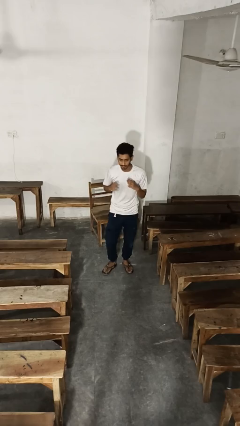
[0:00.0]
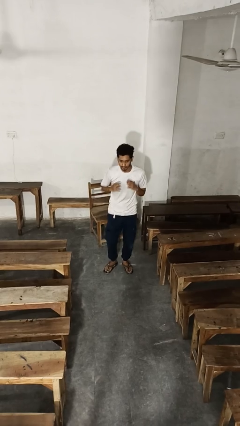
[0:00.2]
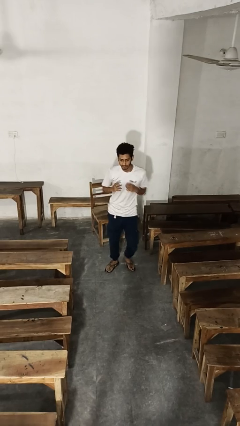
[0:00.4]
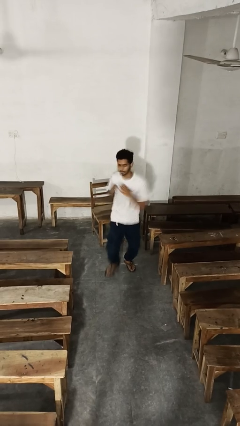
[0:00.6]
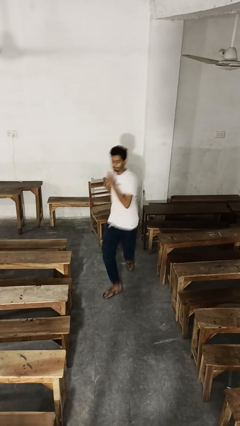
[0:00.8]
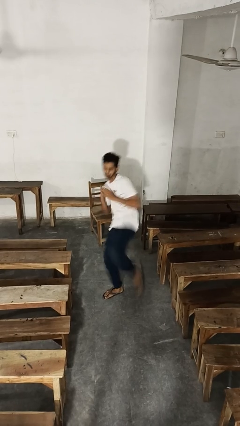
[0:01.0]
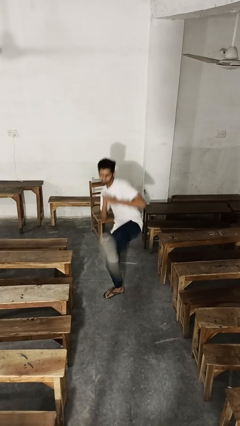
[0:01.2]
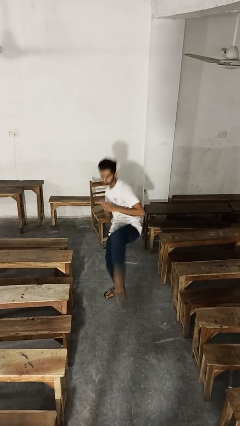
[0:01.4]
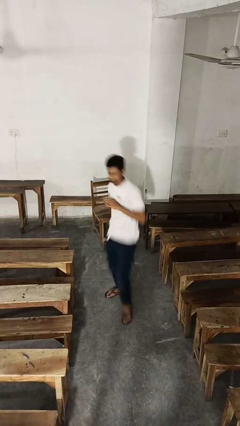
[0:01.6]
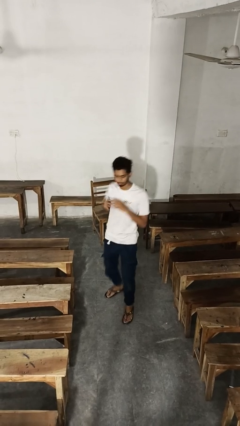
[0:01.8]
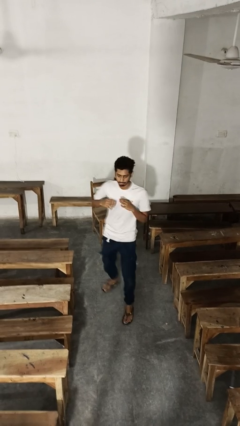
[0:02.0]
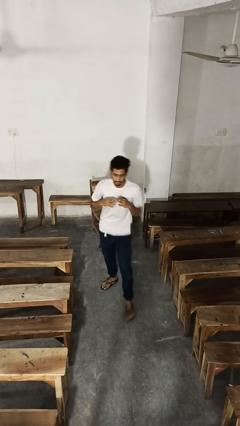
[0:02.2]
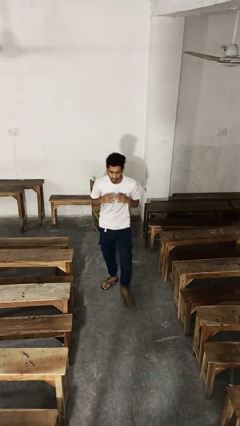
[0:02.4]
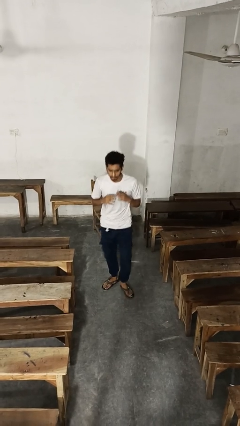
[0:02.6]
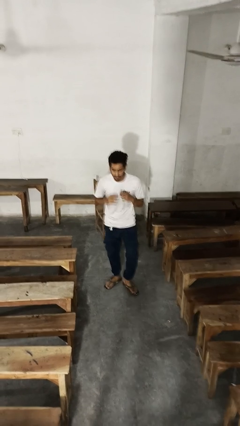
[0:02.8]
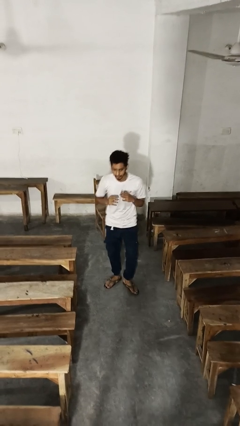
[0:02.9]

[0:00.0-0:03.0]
person karate kicks

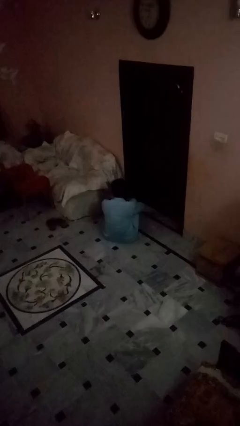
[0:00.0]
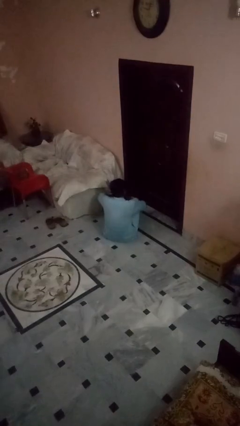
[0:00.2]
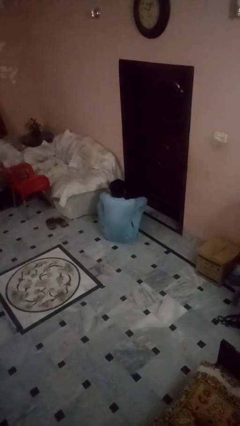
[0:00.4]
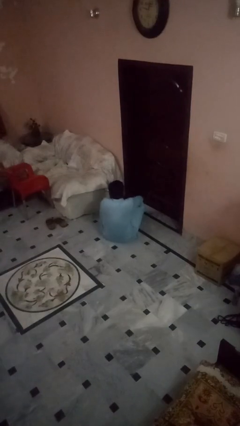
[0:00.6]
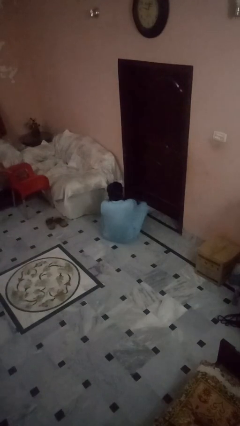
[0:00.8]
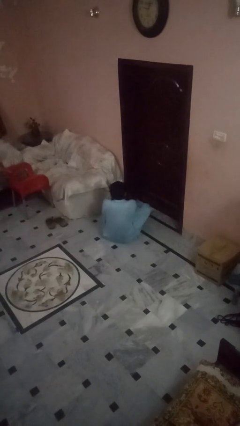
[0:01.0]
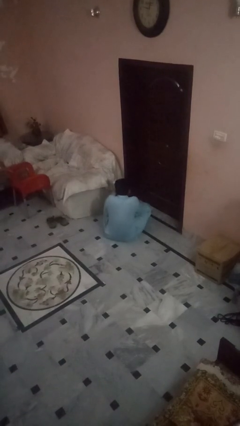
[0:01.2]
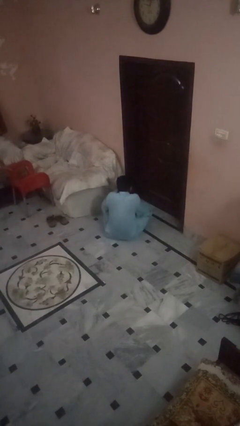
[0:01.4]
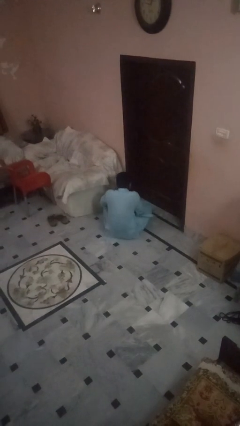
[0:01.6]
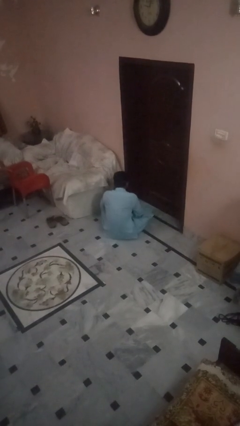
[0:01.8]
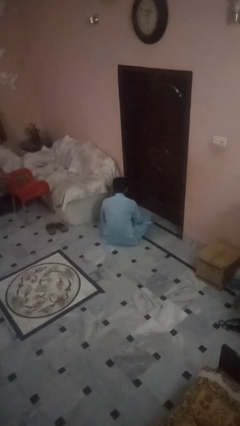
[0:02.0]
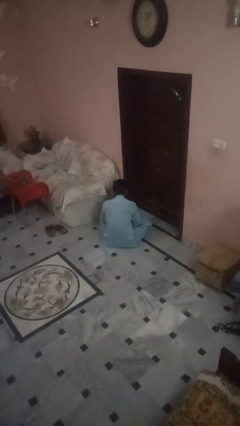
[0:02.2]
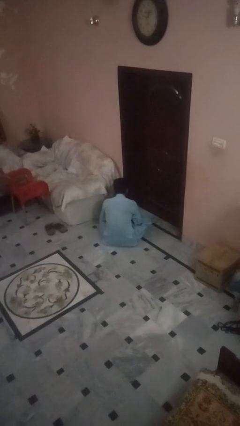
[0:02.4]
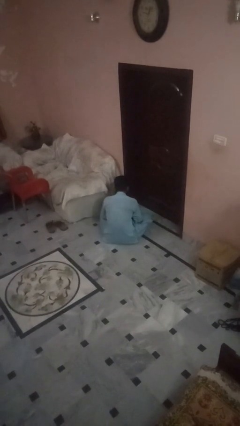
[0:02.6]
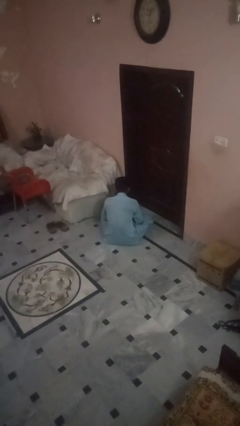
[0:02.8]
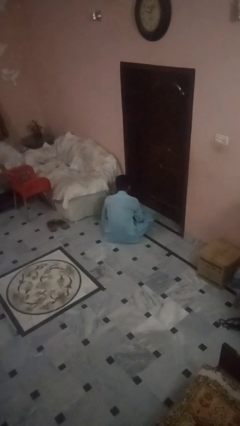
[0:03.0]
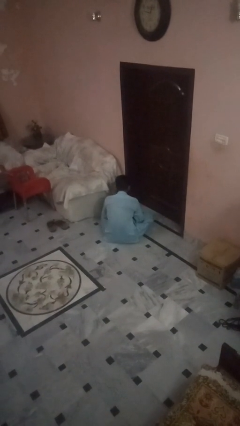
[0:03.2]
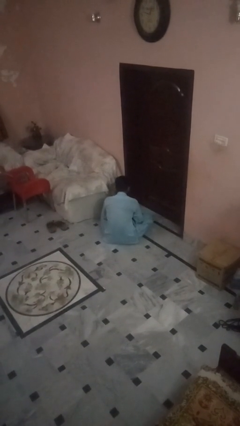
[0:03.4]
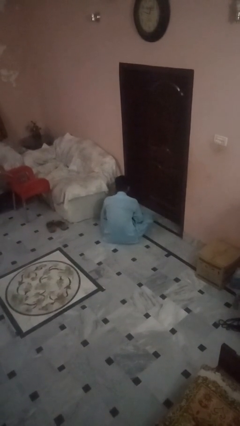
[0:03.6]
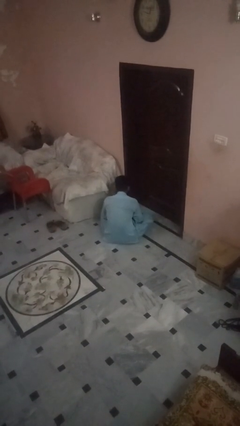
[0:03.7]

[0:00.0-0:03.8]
person crosses legs

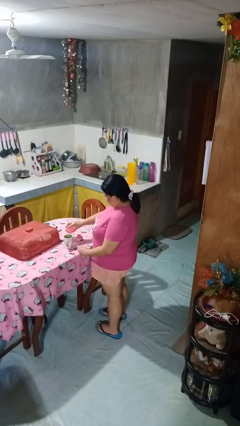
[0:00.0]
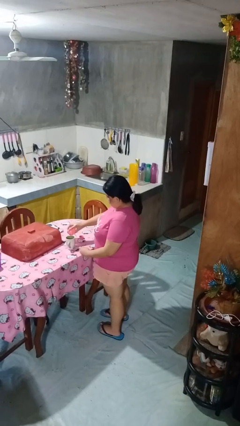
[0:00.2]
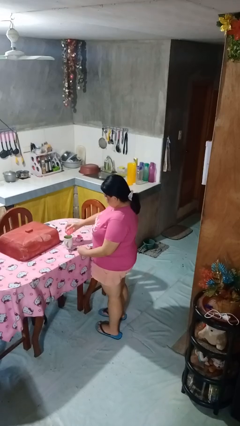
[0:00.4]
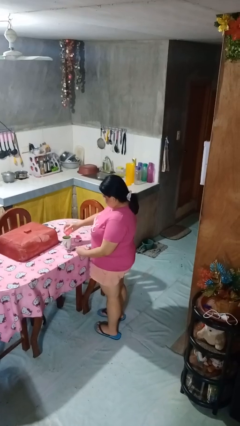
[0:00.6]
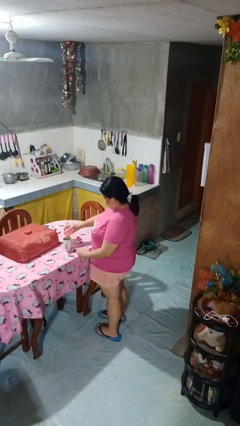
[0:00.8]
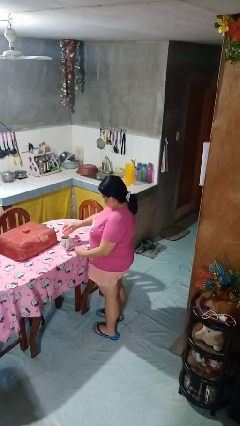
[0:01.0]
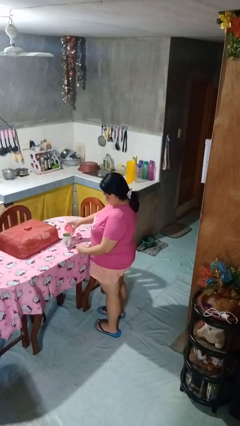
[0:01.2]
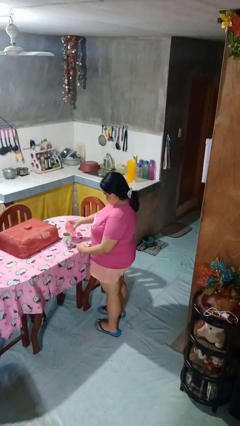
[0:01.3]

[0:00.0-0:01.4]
person pours liquid into cup

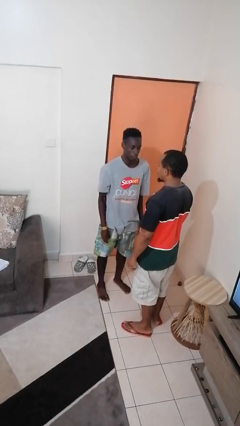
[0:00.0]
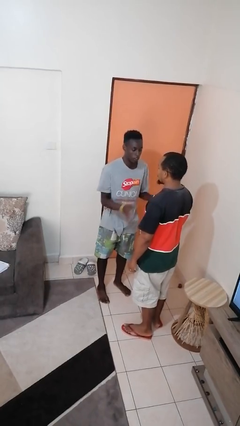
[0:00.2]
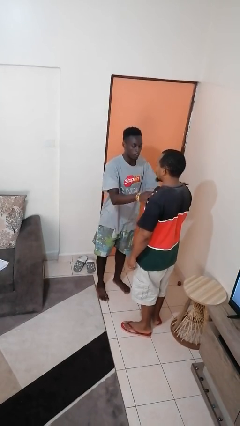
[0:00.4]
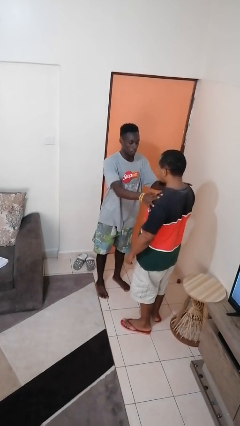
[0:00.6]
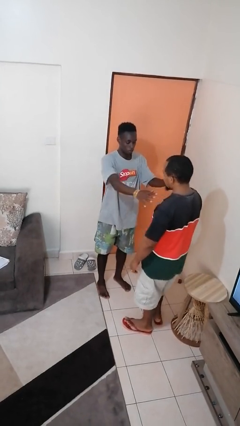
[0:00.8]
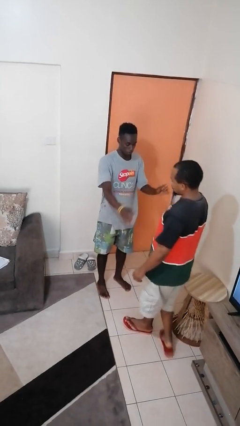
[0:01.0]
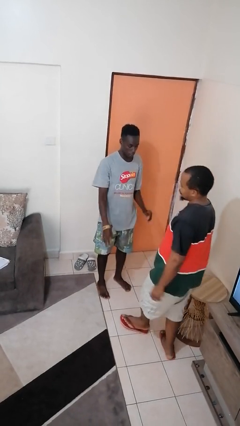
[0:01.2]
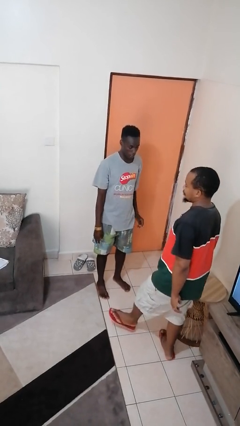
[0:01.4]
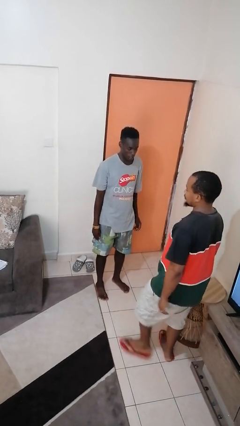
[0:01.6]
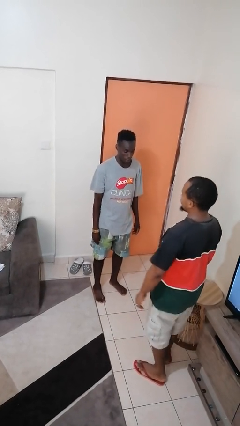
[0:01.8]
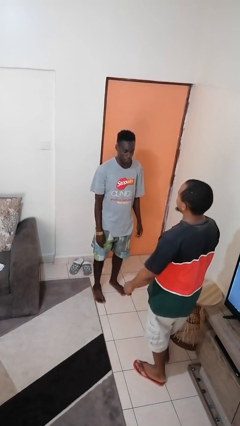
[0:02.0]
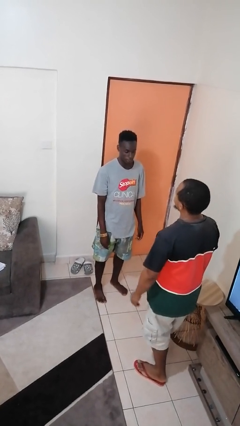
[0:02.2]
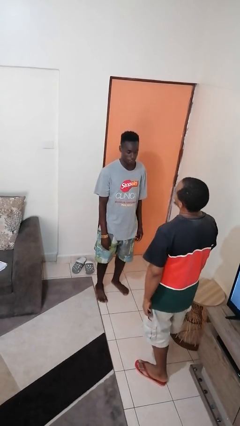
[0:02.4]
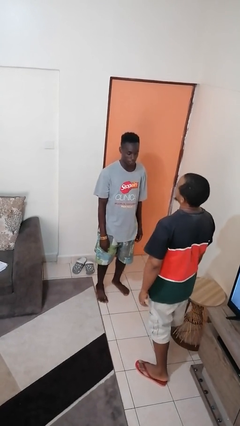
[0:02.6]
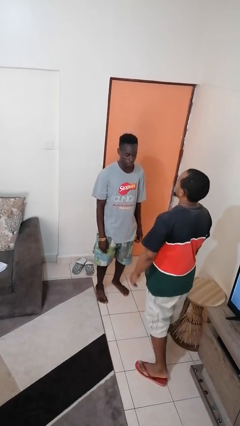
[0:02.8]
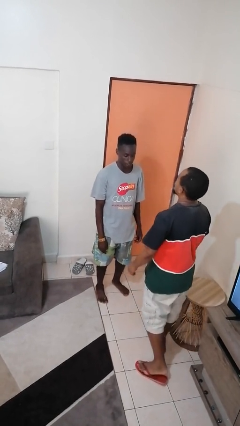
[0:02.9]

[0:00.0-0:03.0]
person shoves person

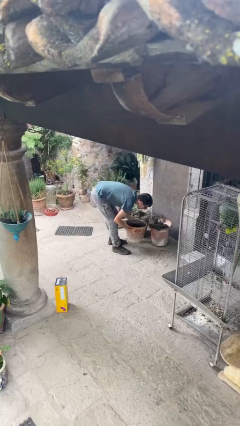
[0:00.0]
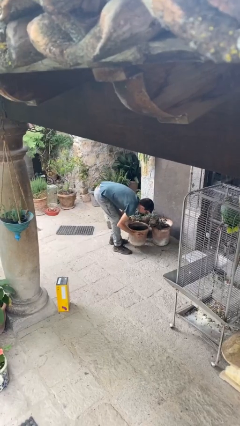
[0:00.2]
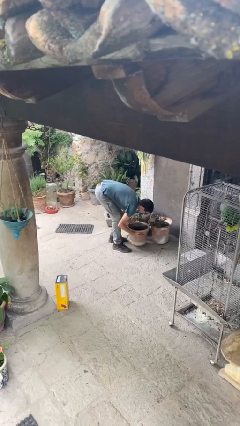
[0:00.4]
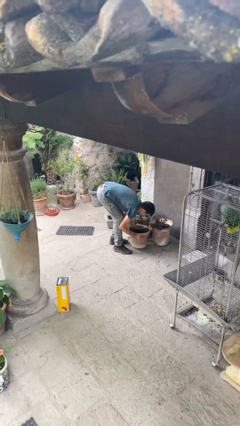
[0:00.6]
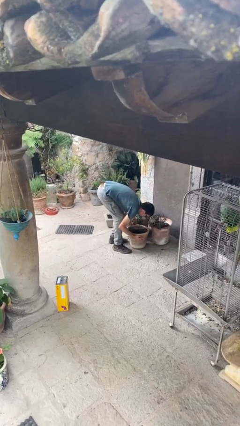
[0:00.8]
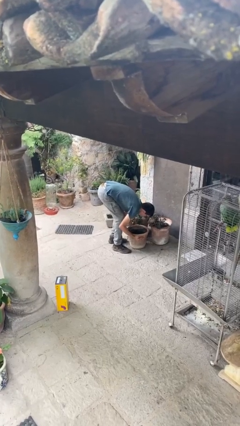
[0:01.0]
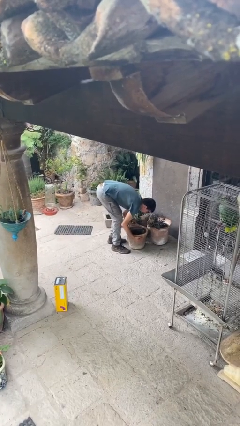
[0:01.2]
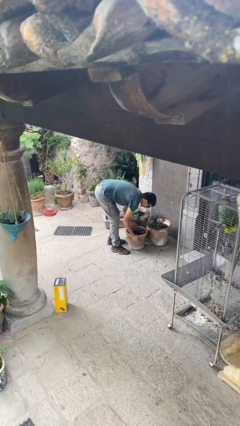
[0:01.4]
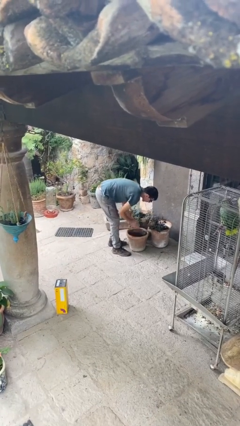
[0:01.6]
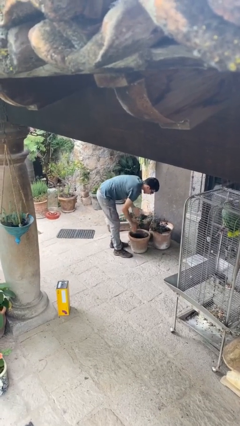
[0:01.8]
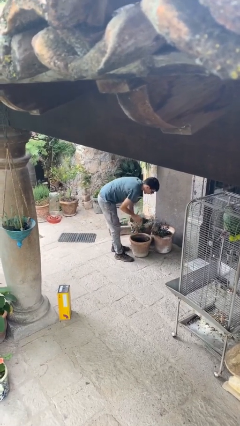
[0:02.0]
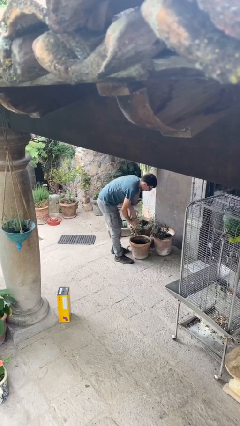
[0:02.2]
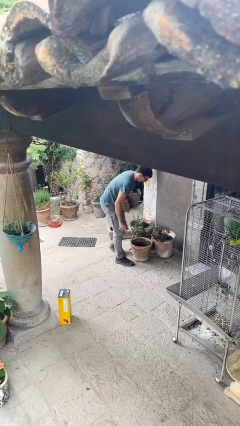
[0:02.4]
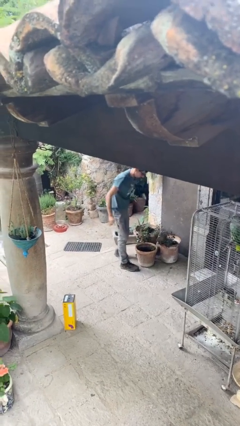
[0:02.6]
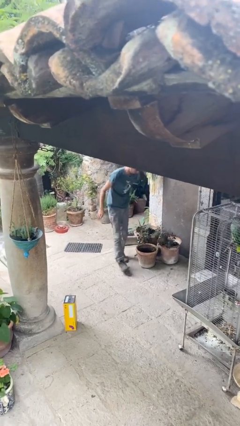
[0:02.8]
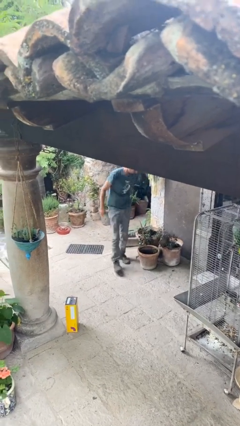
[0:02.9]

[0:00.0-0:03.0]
person puts down object on floor

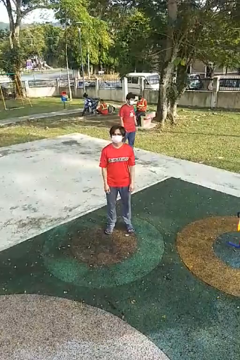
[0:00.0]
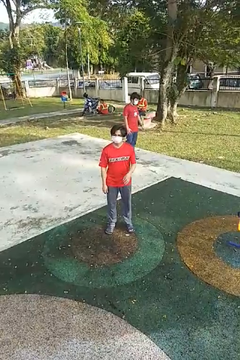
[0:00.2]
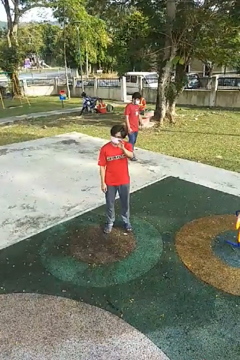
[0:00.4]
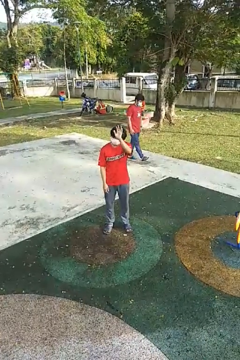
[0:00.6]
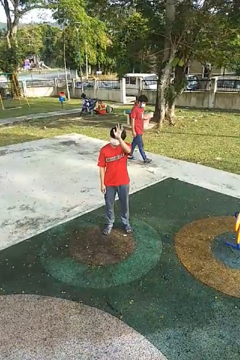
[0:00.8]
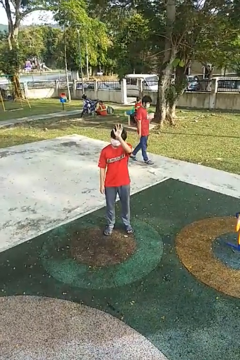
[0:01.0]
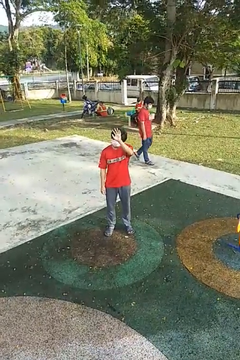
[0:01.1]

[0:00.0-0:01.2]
person waves at person

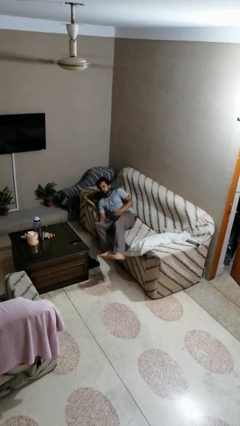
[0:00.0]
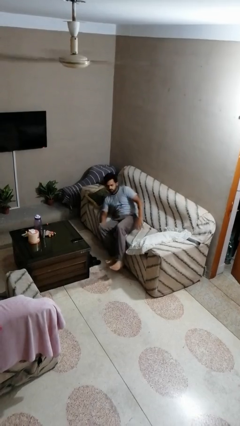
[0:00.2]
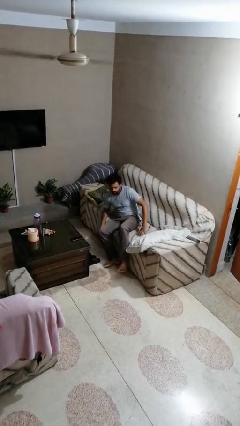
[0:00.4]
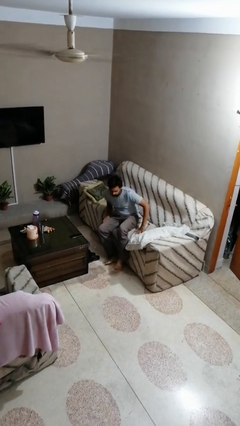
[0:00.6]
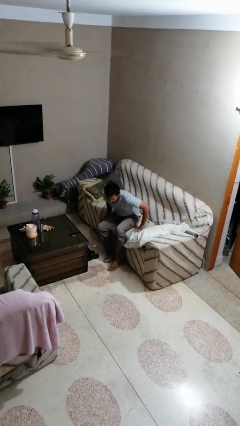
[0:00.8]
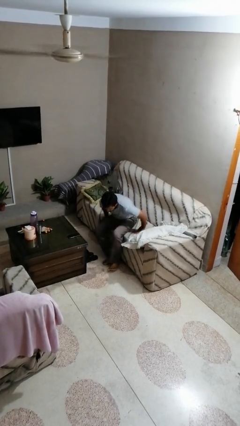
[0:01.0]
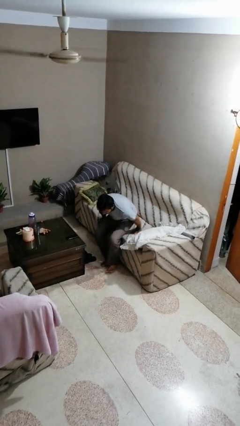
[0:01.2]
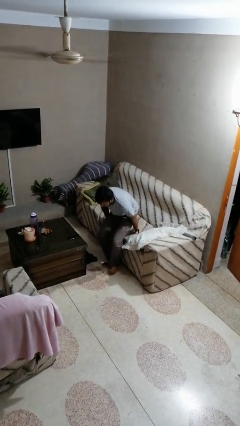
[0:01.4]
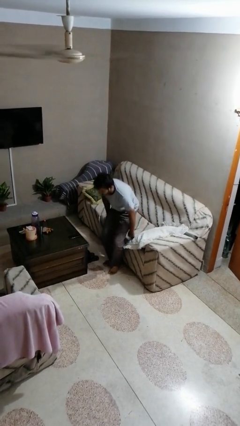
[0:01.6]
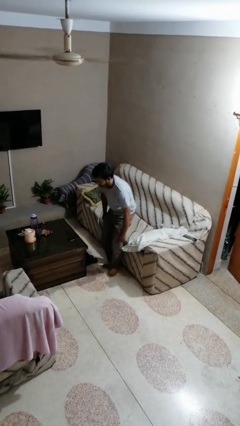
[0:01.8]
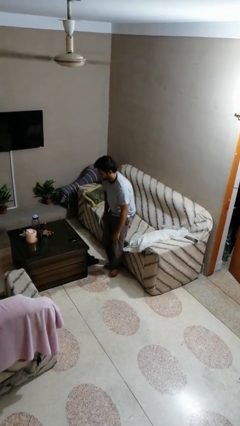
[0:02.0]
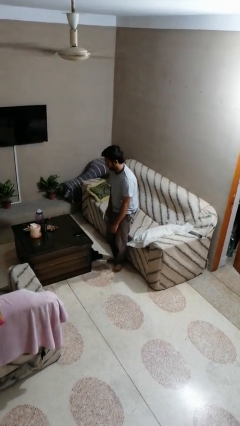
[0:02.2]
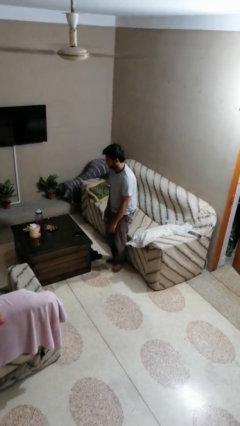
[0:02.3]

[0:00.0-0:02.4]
person stands up
